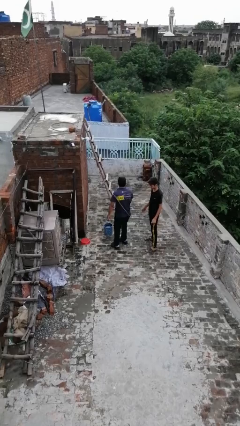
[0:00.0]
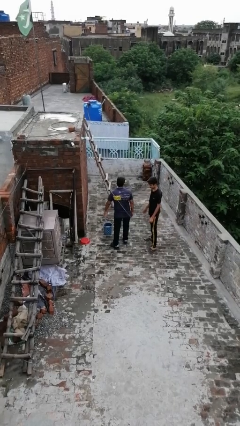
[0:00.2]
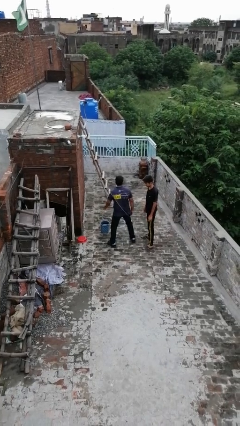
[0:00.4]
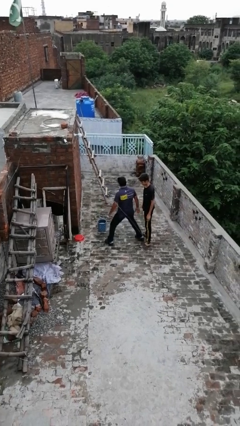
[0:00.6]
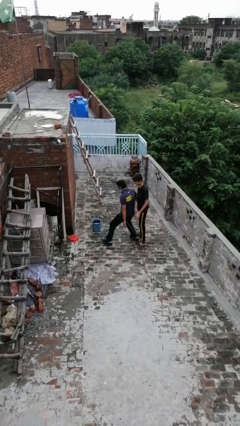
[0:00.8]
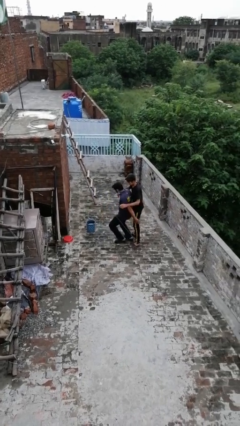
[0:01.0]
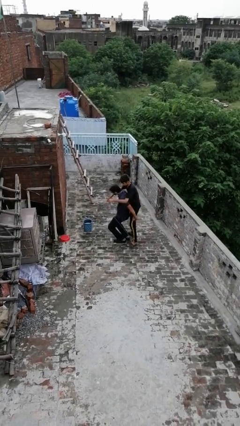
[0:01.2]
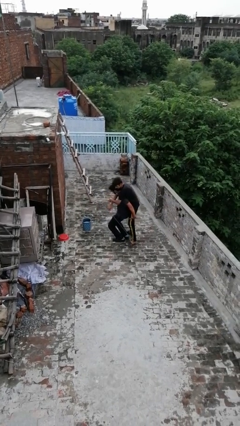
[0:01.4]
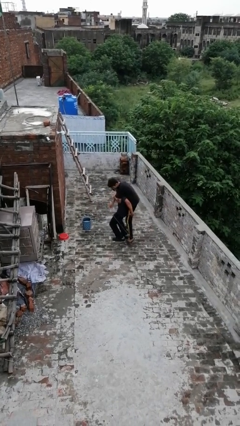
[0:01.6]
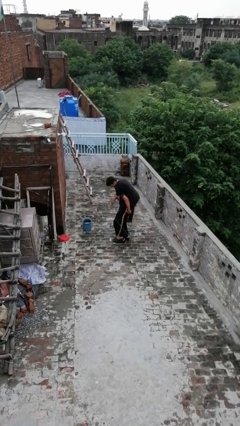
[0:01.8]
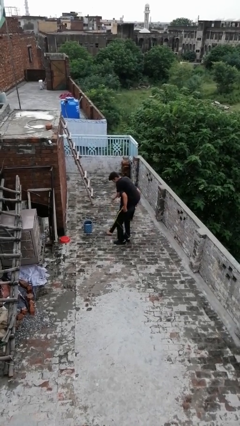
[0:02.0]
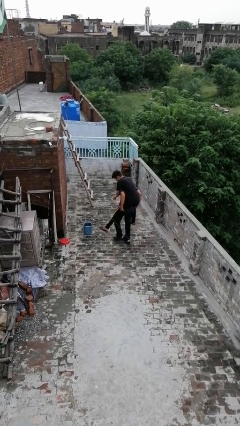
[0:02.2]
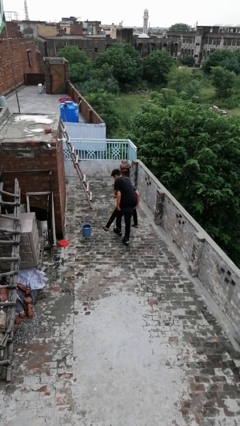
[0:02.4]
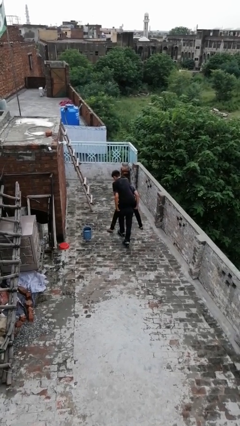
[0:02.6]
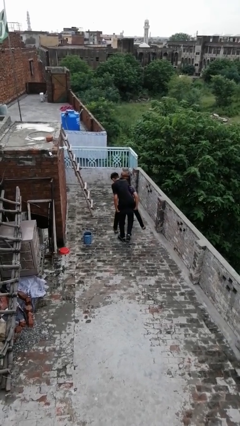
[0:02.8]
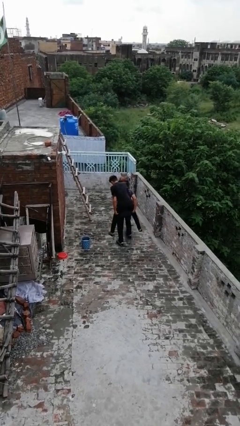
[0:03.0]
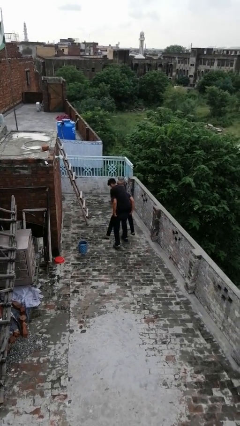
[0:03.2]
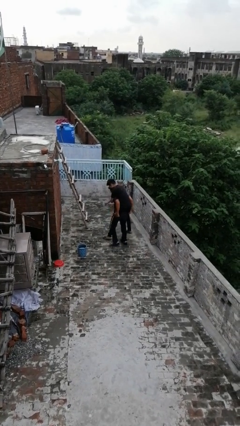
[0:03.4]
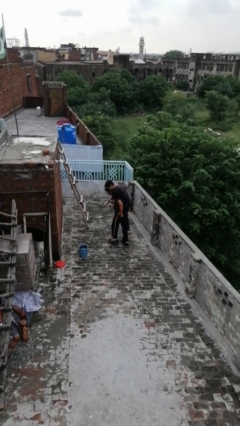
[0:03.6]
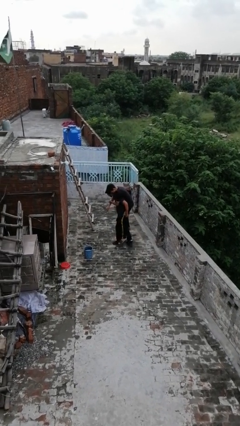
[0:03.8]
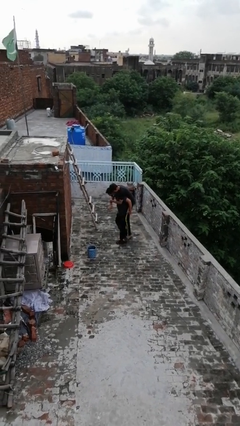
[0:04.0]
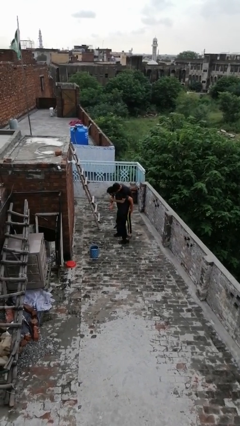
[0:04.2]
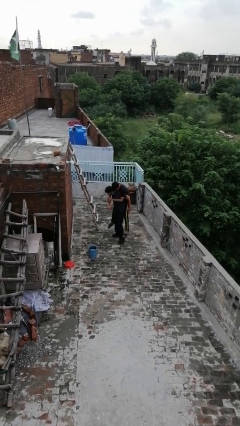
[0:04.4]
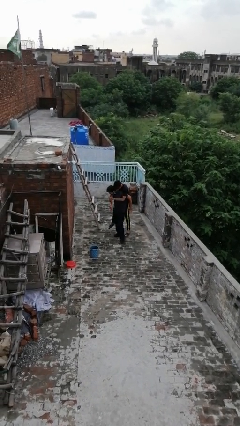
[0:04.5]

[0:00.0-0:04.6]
person carries person on back

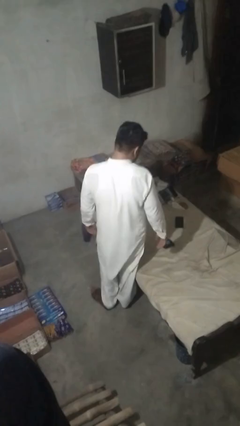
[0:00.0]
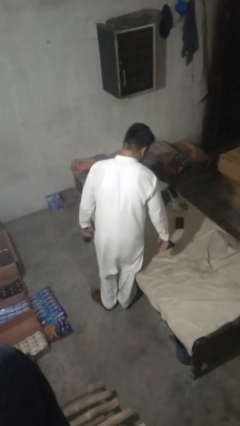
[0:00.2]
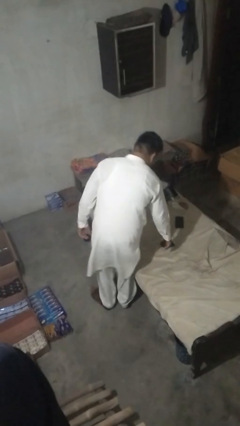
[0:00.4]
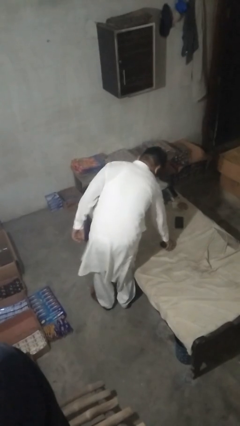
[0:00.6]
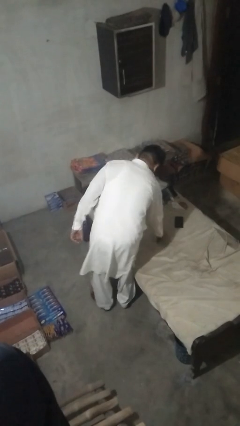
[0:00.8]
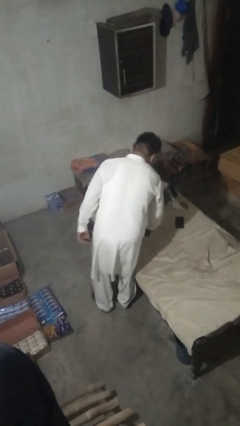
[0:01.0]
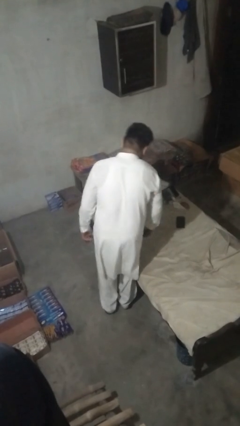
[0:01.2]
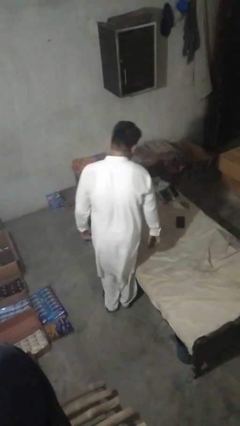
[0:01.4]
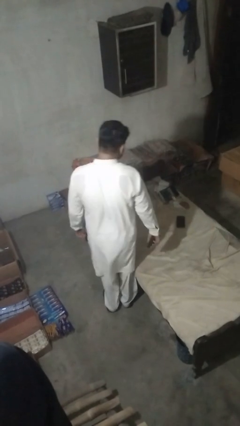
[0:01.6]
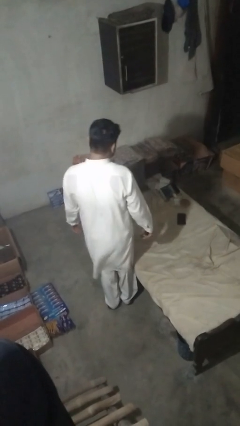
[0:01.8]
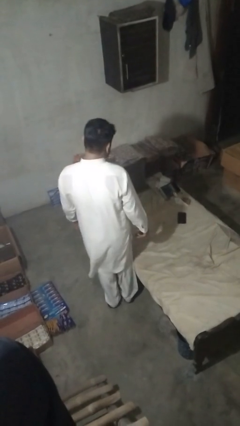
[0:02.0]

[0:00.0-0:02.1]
person picks up object from bed

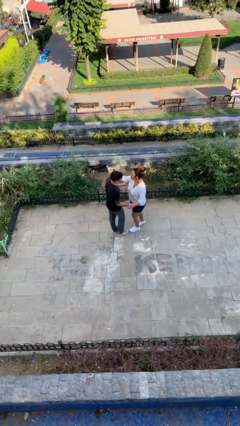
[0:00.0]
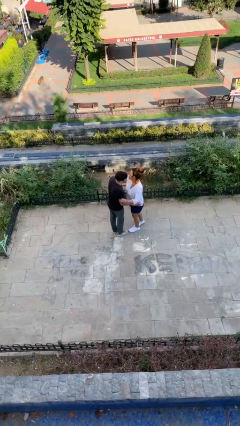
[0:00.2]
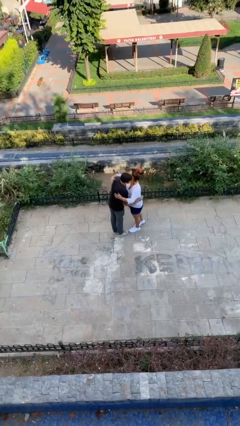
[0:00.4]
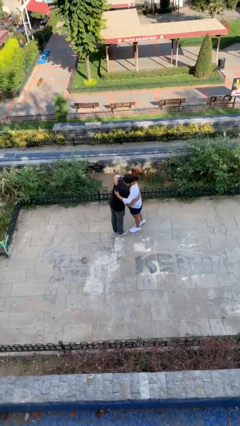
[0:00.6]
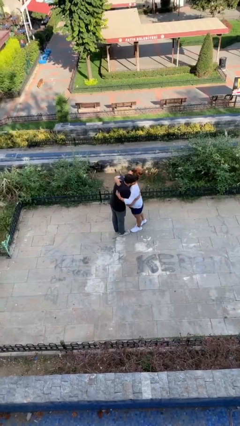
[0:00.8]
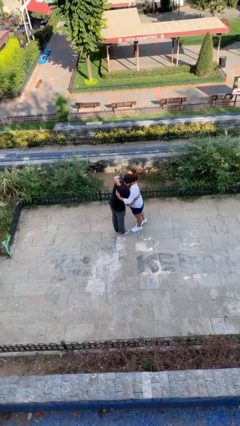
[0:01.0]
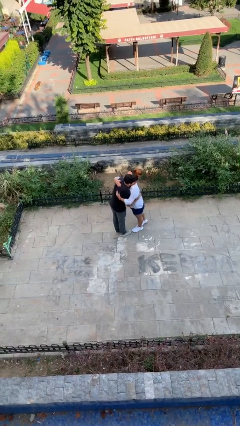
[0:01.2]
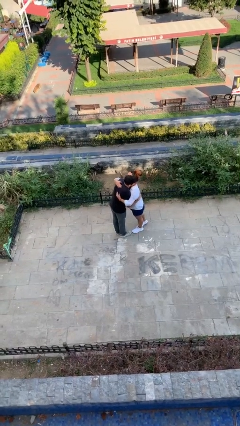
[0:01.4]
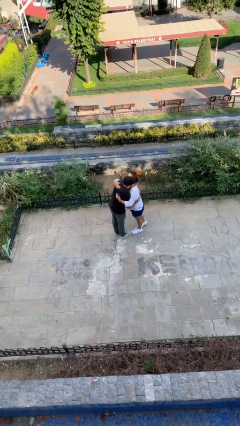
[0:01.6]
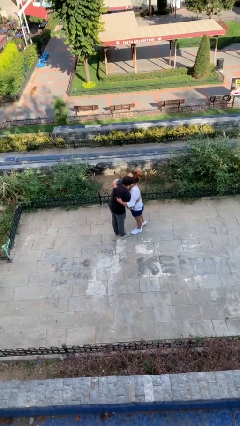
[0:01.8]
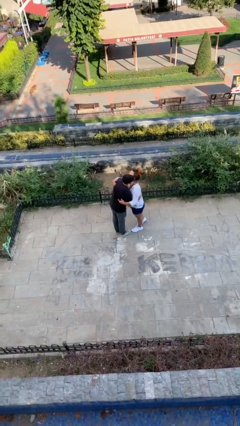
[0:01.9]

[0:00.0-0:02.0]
person embraces person

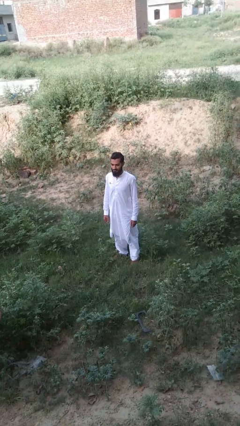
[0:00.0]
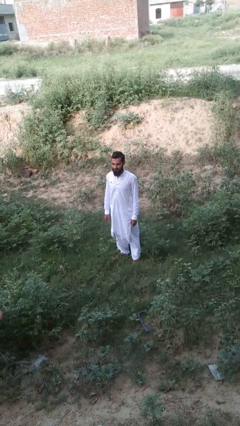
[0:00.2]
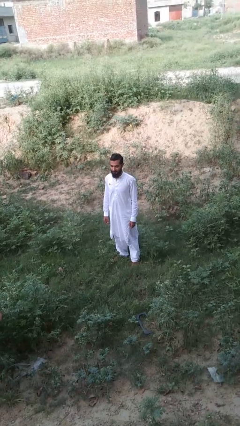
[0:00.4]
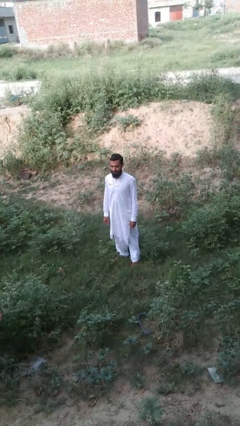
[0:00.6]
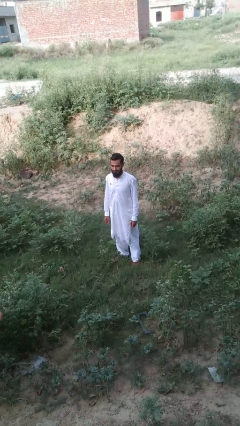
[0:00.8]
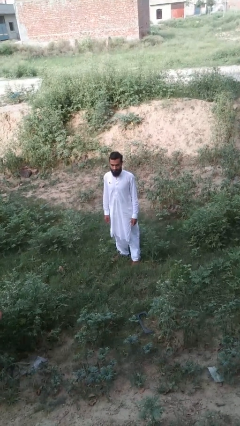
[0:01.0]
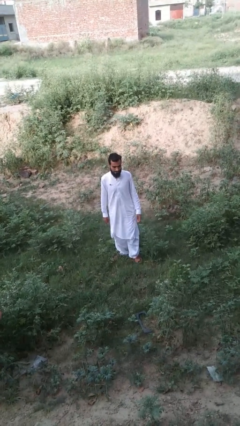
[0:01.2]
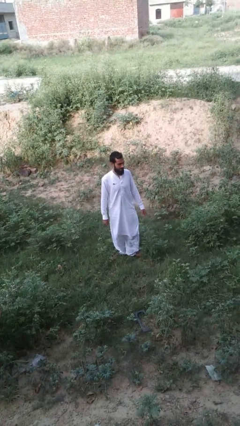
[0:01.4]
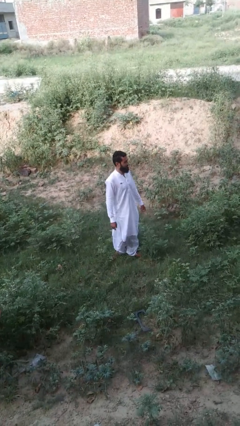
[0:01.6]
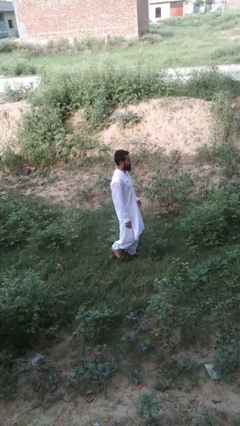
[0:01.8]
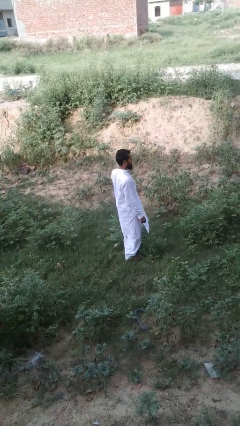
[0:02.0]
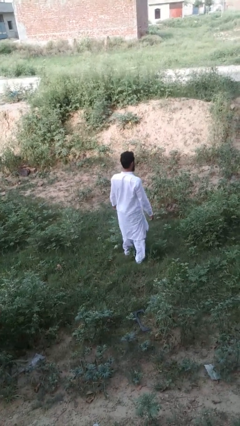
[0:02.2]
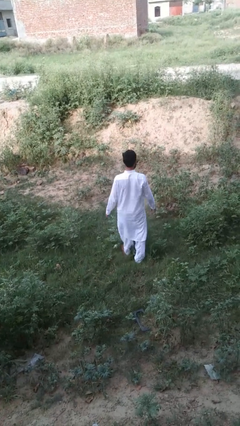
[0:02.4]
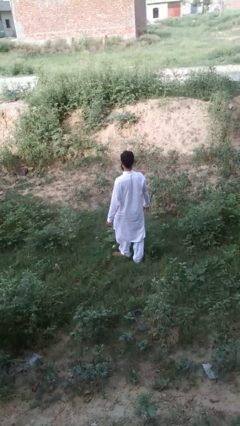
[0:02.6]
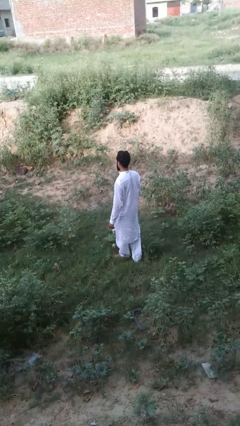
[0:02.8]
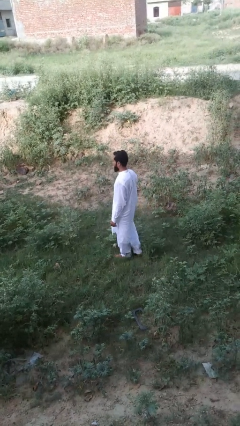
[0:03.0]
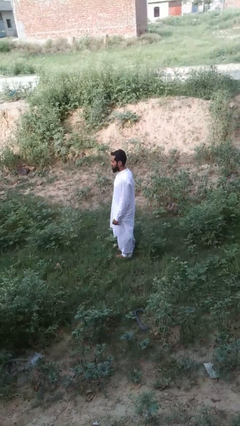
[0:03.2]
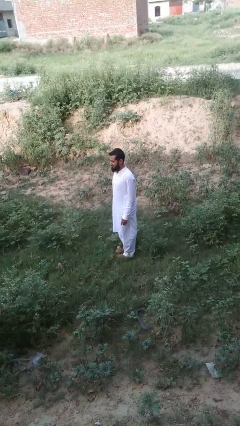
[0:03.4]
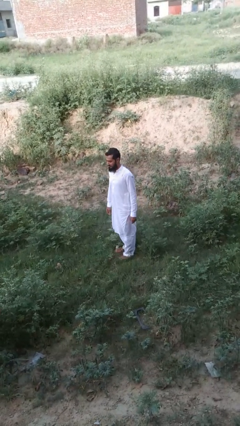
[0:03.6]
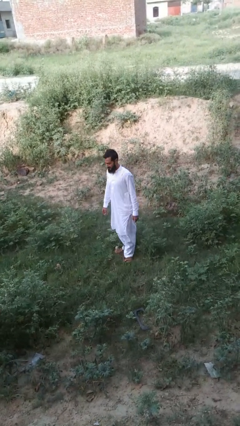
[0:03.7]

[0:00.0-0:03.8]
person twirls

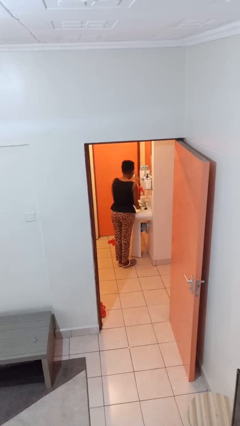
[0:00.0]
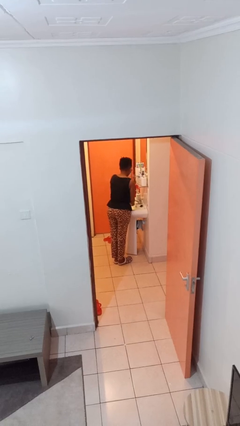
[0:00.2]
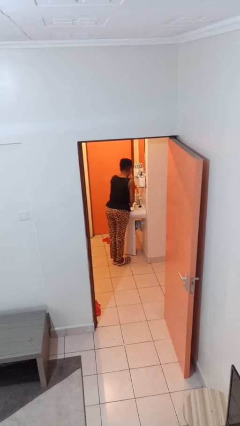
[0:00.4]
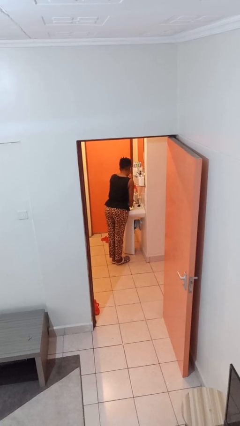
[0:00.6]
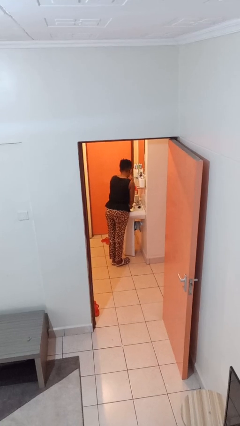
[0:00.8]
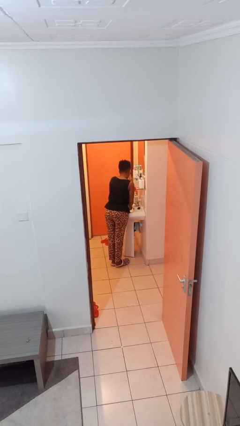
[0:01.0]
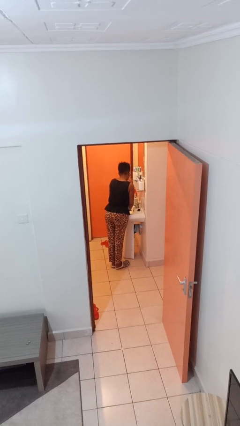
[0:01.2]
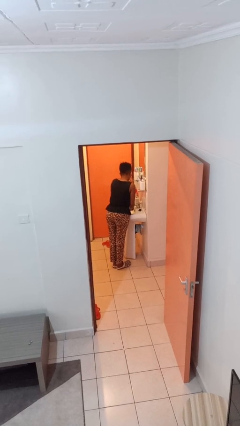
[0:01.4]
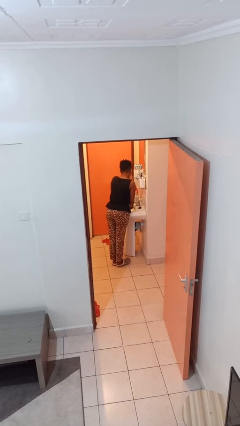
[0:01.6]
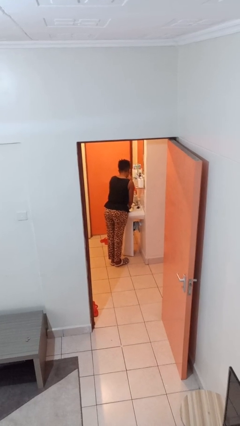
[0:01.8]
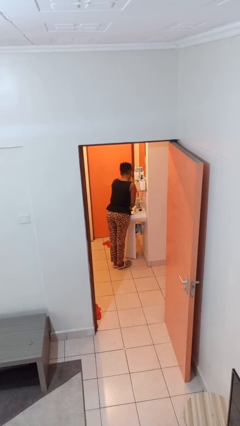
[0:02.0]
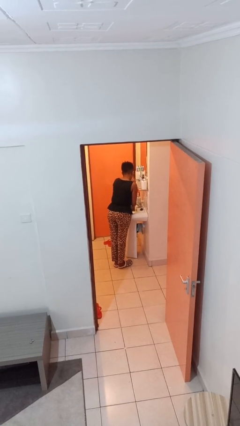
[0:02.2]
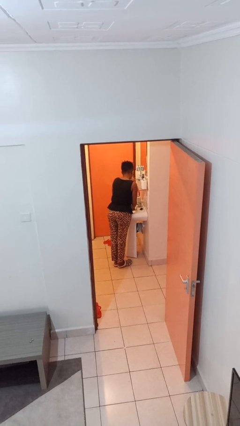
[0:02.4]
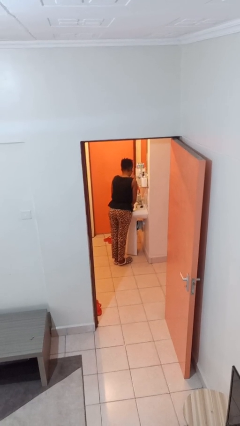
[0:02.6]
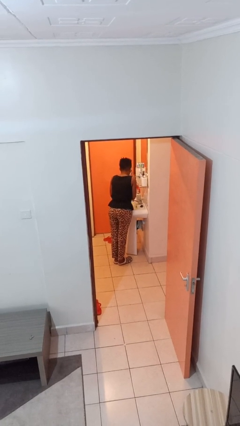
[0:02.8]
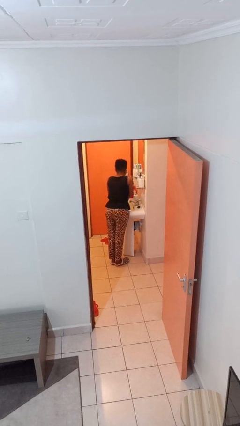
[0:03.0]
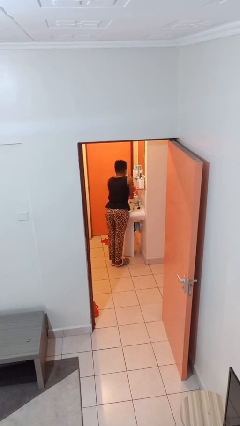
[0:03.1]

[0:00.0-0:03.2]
person washes hands

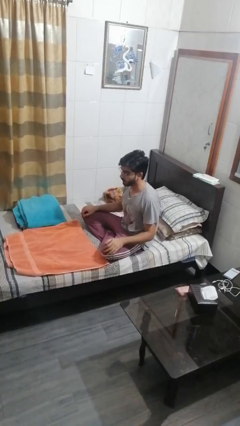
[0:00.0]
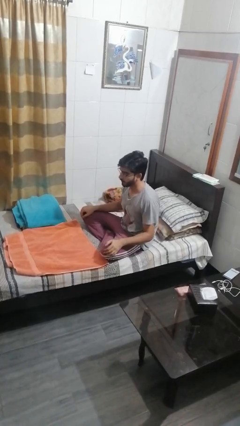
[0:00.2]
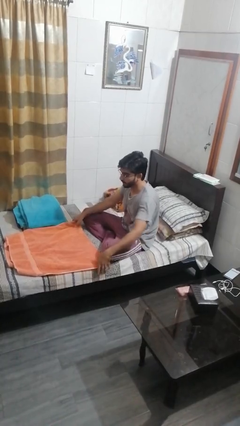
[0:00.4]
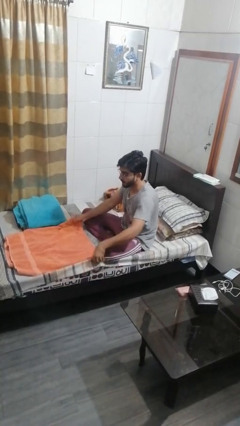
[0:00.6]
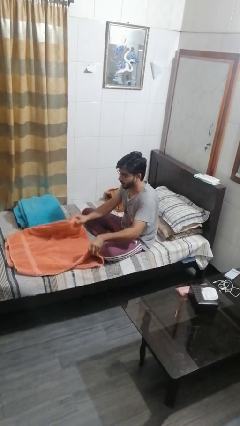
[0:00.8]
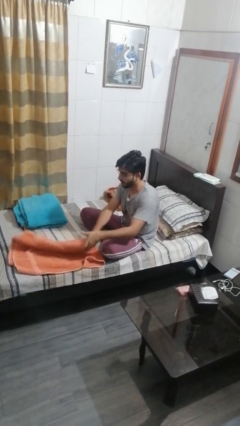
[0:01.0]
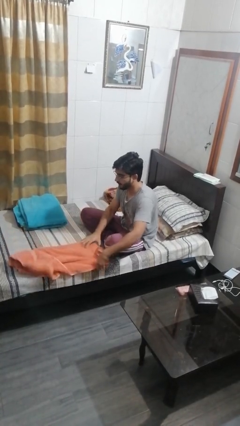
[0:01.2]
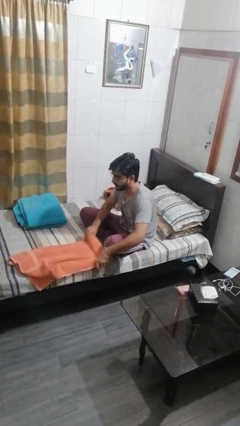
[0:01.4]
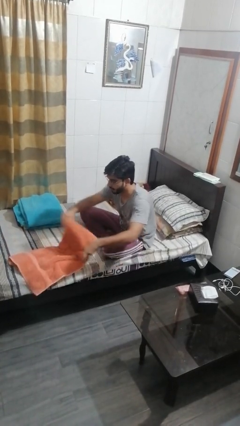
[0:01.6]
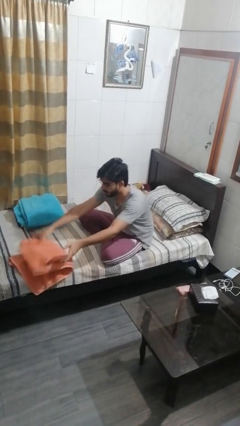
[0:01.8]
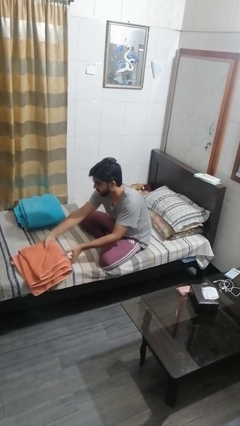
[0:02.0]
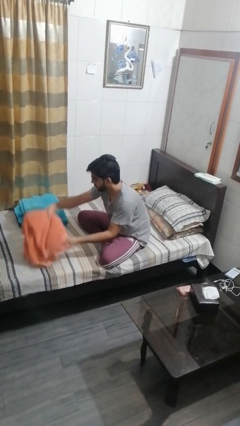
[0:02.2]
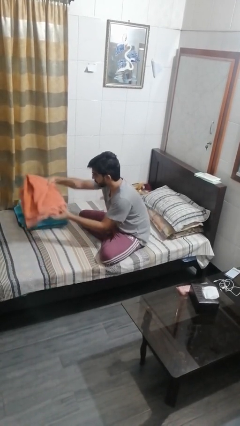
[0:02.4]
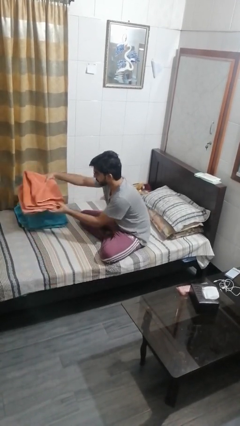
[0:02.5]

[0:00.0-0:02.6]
person folds towel
